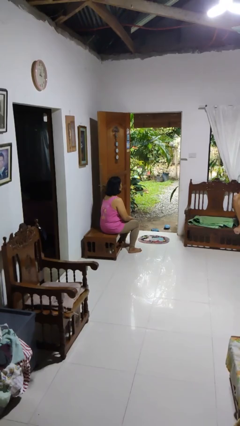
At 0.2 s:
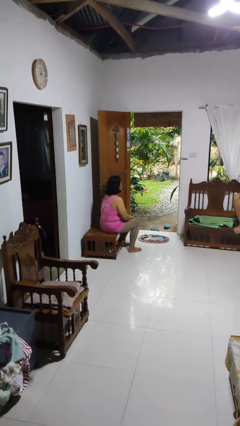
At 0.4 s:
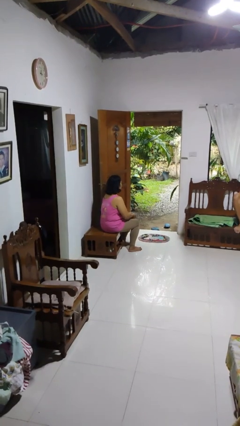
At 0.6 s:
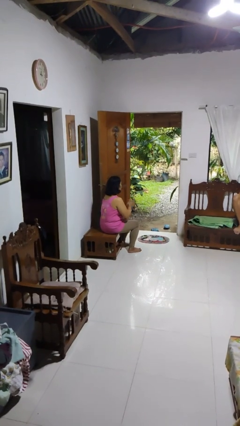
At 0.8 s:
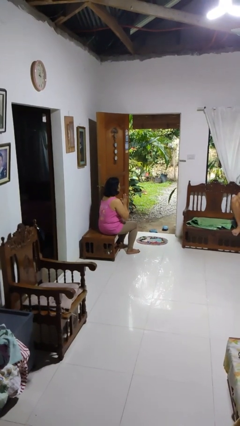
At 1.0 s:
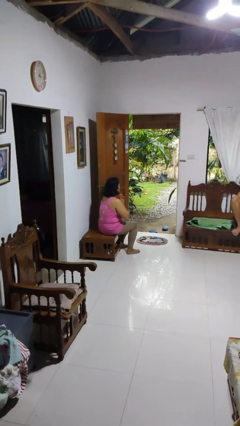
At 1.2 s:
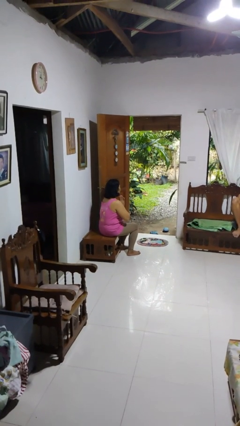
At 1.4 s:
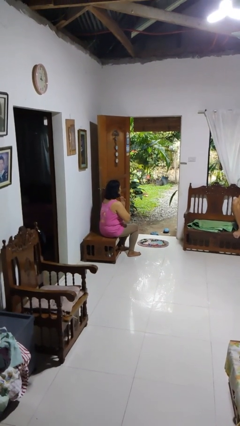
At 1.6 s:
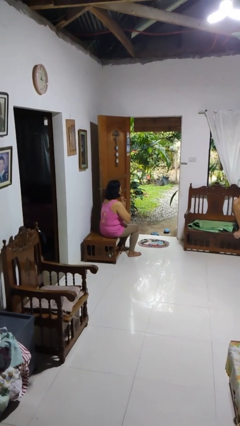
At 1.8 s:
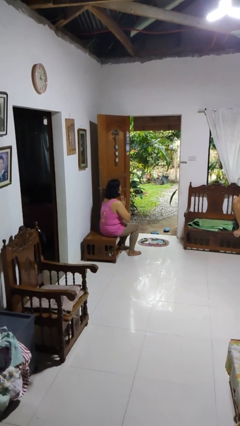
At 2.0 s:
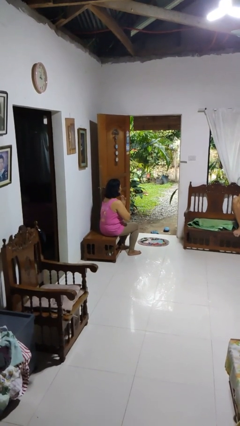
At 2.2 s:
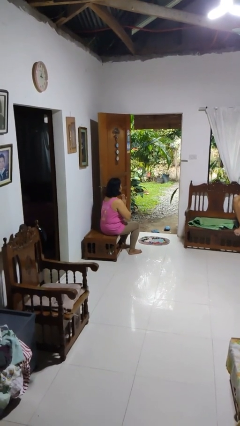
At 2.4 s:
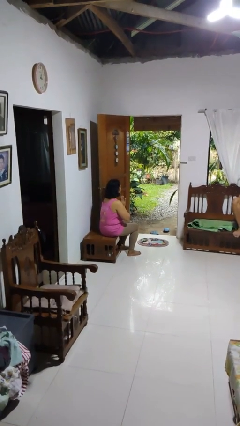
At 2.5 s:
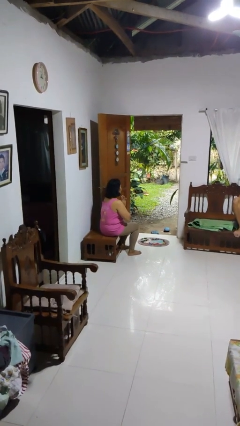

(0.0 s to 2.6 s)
person prays

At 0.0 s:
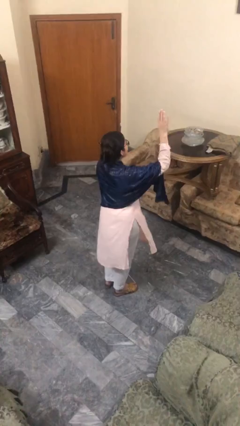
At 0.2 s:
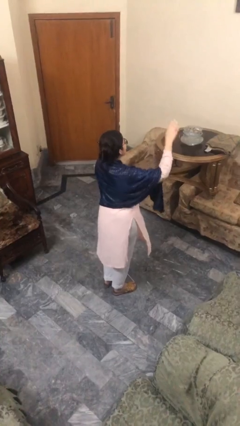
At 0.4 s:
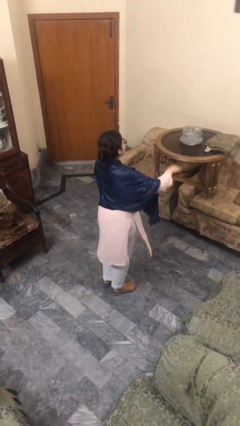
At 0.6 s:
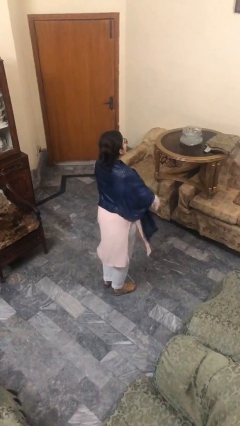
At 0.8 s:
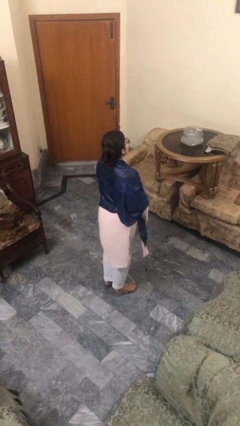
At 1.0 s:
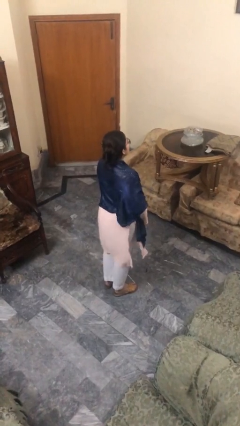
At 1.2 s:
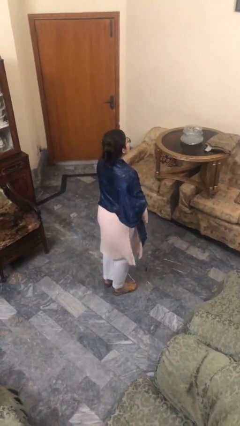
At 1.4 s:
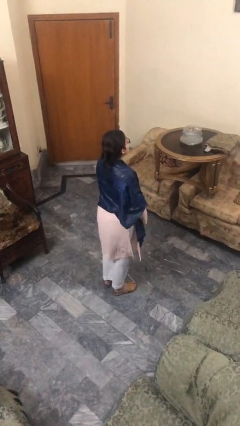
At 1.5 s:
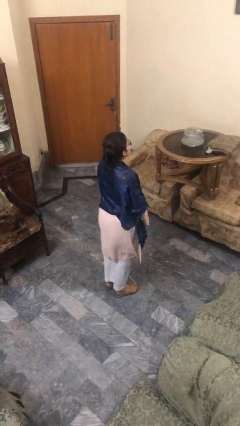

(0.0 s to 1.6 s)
person gestures lower hand

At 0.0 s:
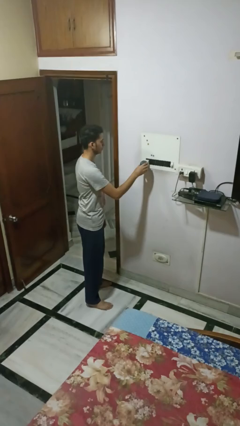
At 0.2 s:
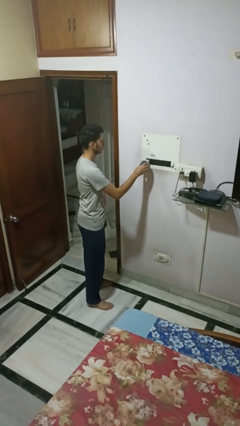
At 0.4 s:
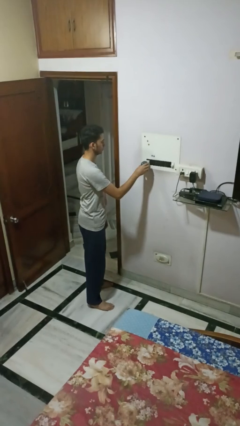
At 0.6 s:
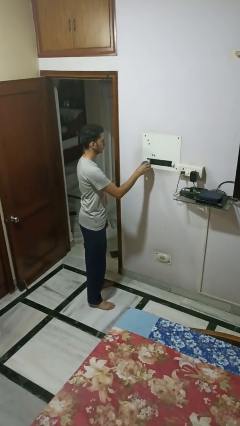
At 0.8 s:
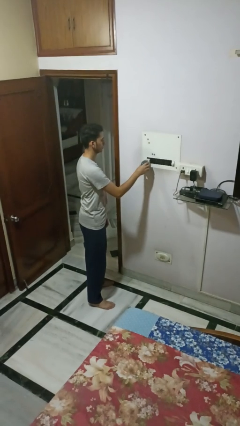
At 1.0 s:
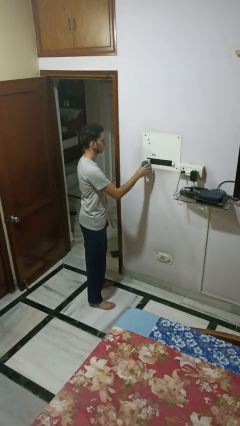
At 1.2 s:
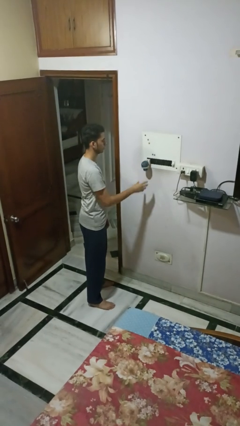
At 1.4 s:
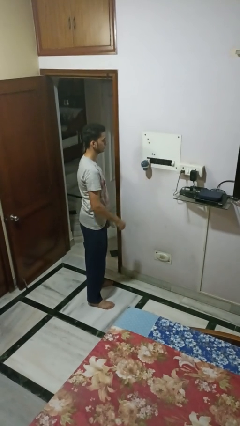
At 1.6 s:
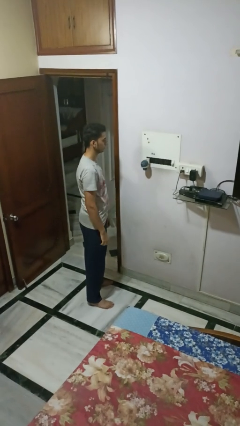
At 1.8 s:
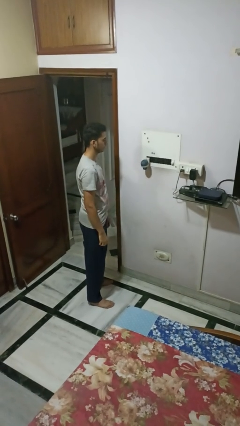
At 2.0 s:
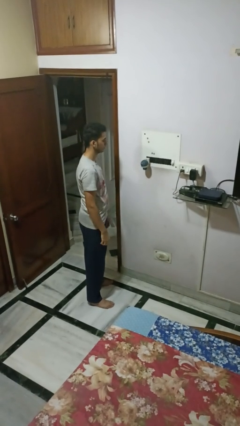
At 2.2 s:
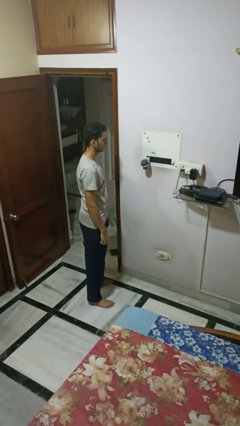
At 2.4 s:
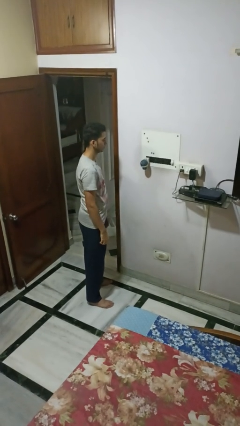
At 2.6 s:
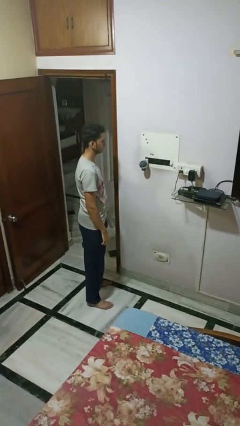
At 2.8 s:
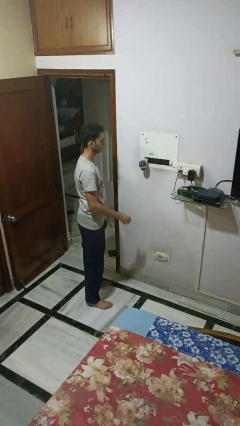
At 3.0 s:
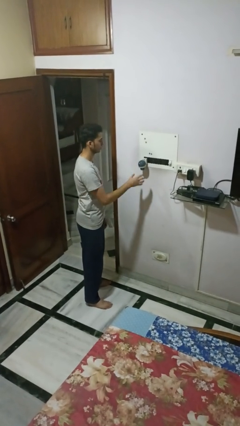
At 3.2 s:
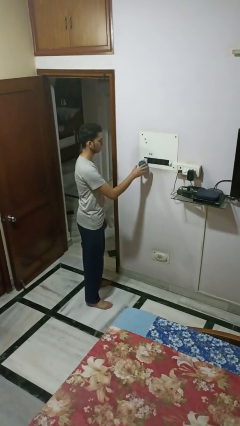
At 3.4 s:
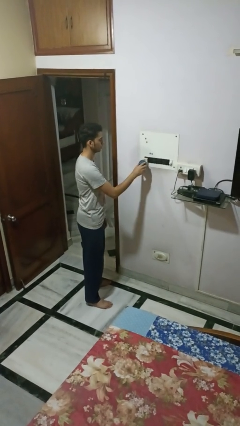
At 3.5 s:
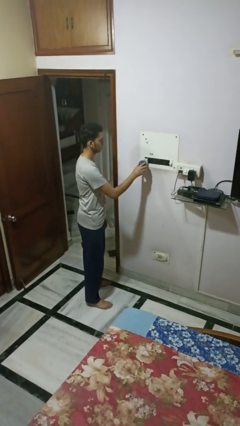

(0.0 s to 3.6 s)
person plugs into electrical socket

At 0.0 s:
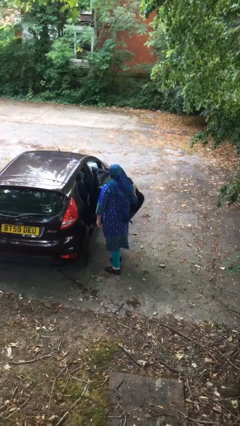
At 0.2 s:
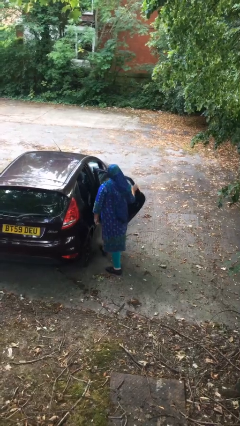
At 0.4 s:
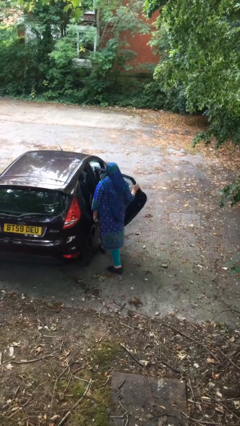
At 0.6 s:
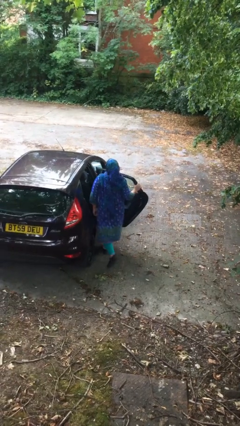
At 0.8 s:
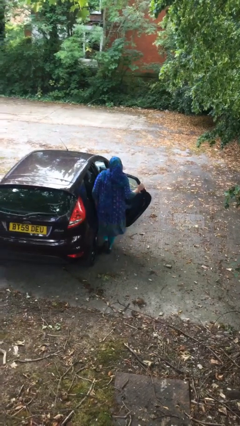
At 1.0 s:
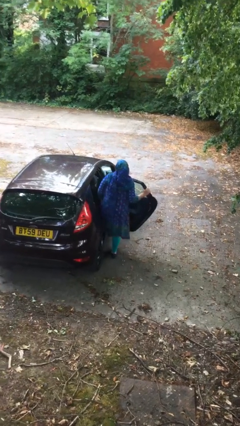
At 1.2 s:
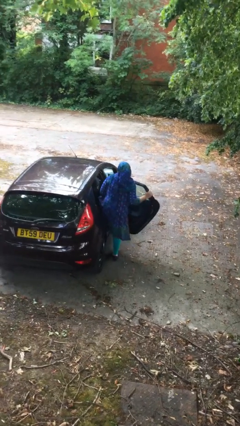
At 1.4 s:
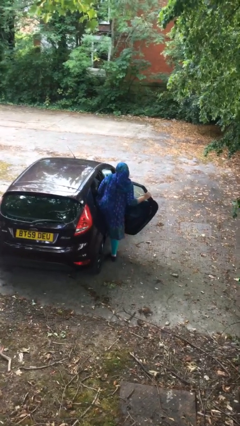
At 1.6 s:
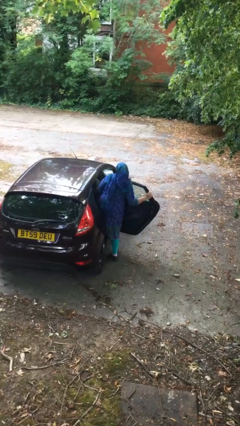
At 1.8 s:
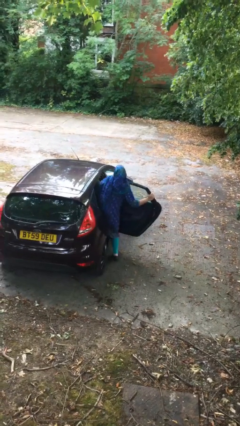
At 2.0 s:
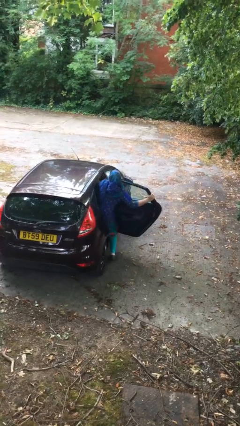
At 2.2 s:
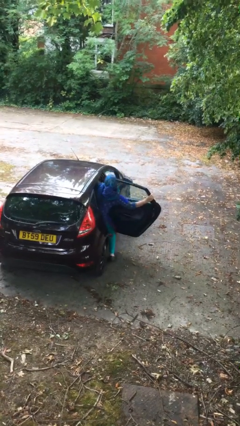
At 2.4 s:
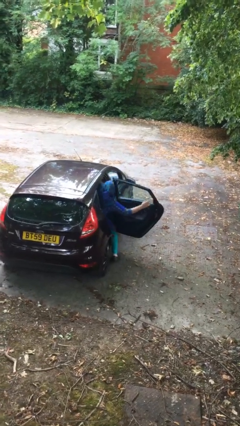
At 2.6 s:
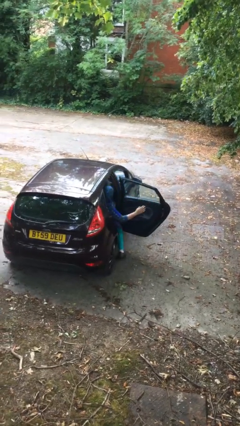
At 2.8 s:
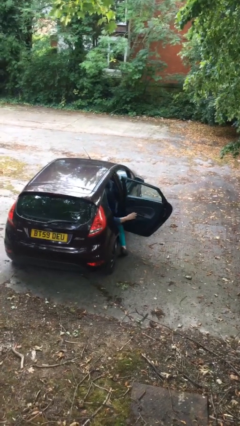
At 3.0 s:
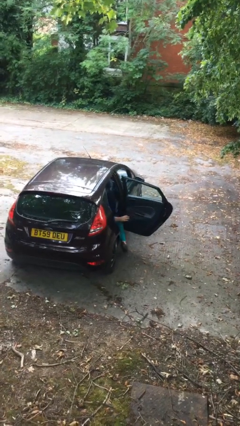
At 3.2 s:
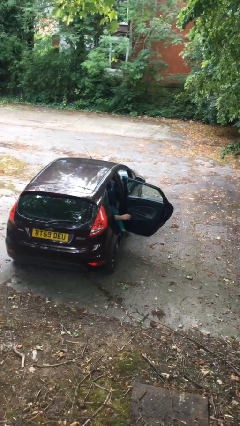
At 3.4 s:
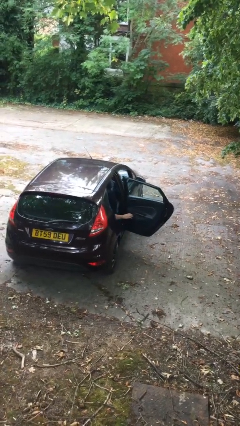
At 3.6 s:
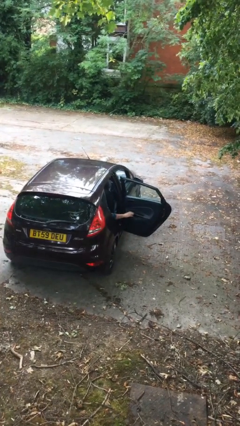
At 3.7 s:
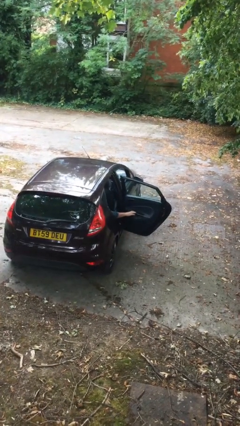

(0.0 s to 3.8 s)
person enters car

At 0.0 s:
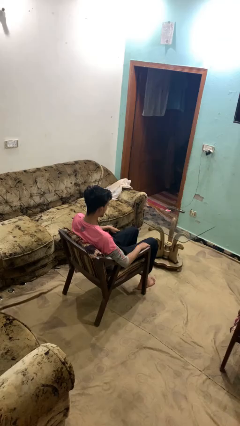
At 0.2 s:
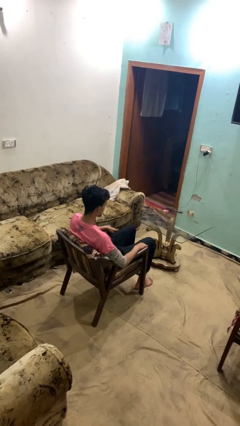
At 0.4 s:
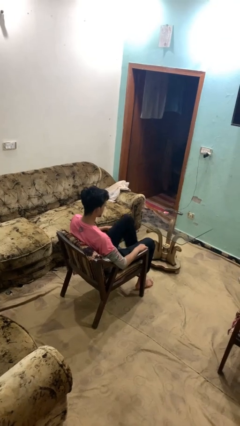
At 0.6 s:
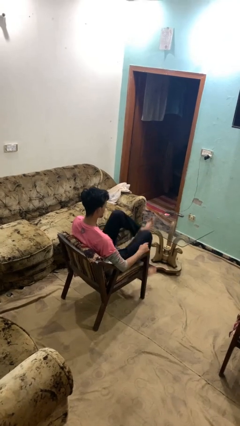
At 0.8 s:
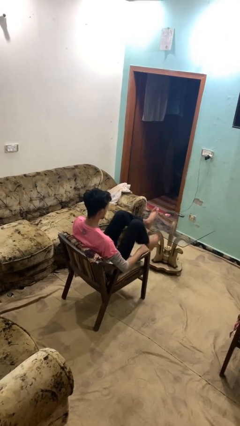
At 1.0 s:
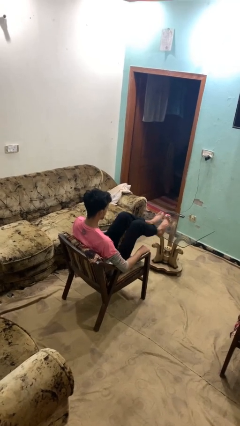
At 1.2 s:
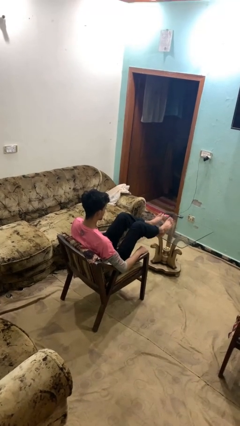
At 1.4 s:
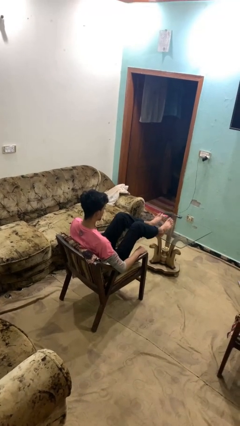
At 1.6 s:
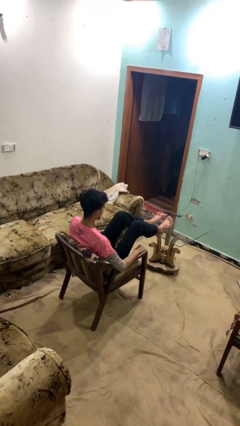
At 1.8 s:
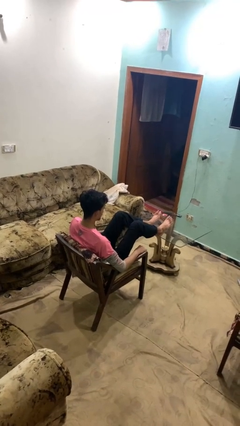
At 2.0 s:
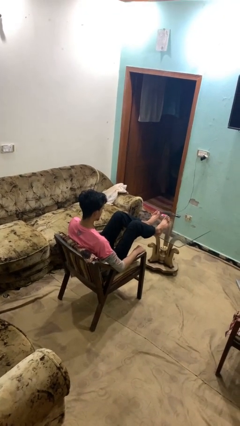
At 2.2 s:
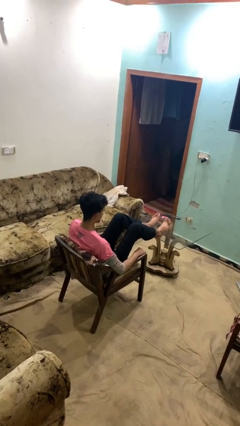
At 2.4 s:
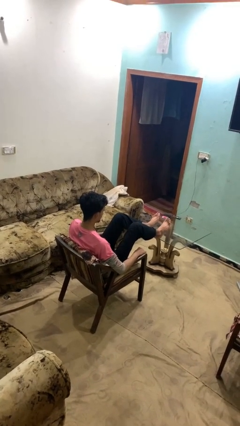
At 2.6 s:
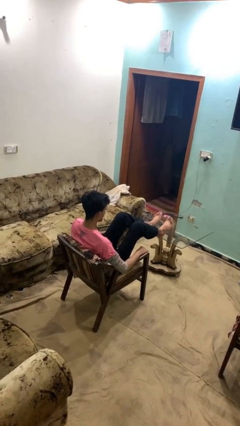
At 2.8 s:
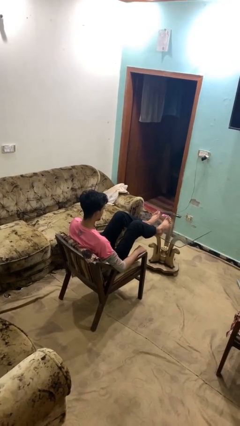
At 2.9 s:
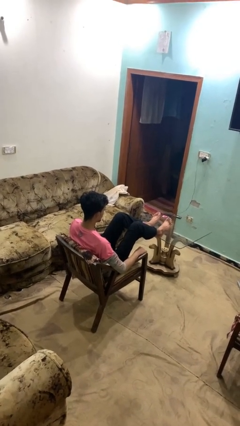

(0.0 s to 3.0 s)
person puts feet up

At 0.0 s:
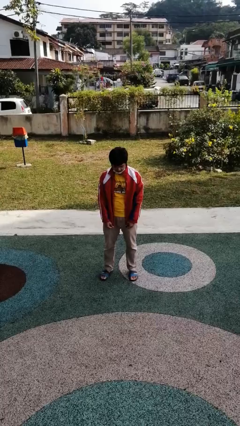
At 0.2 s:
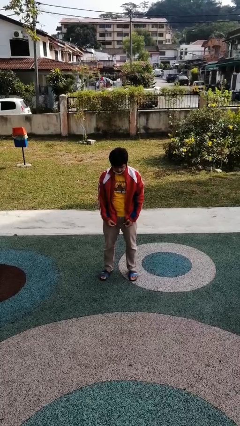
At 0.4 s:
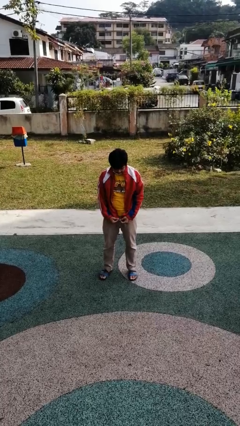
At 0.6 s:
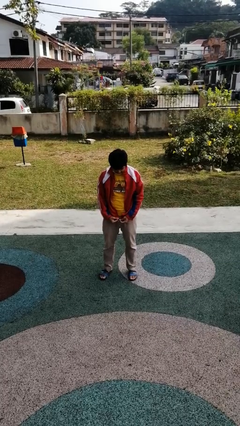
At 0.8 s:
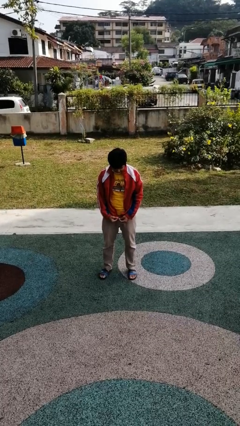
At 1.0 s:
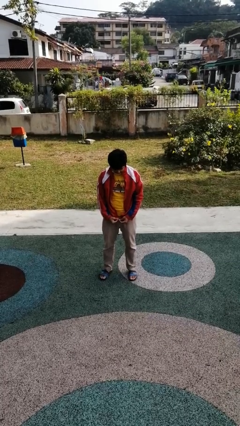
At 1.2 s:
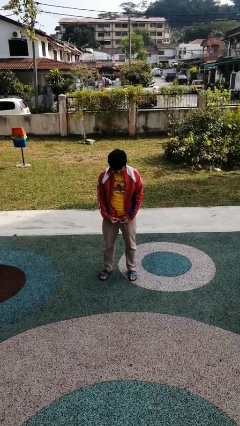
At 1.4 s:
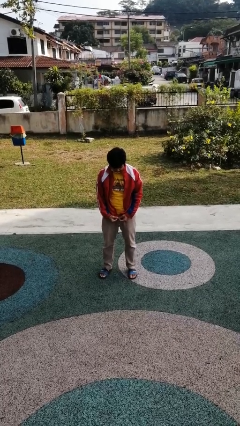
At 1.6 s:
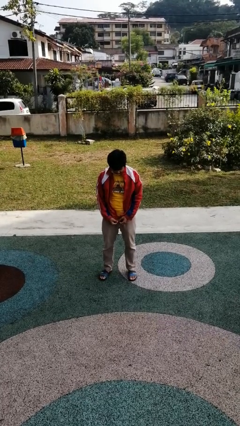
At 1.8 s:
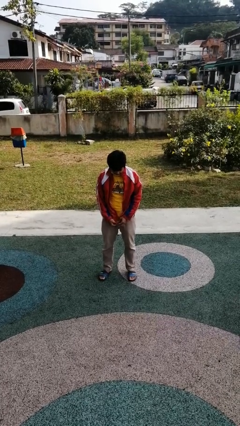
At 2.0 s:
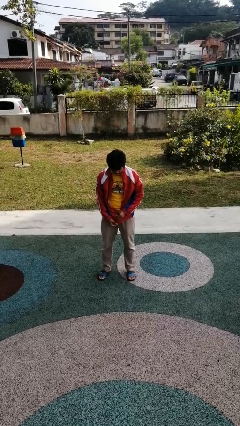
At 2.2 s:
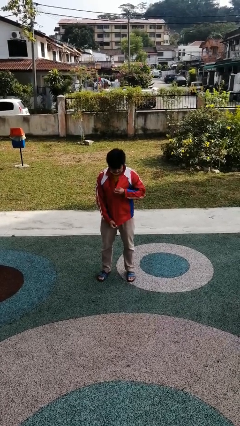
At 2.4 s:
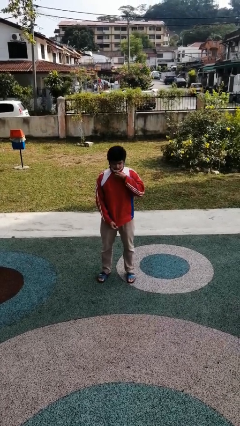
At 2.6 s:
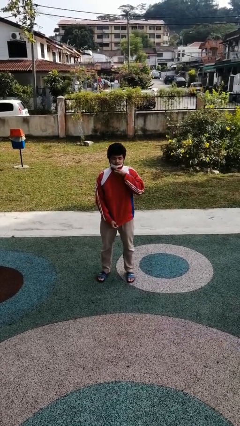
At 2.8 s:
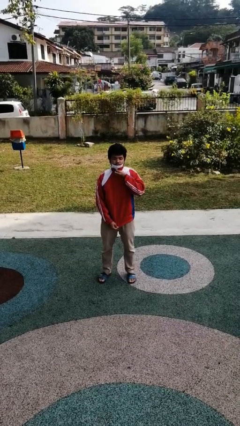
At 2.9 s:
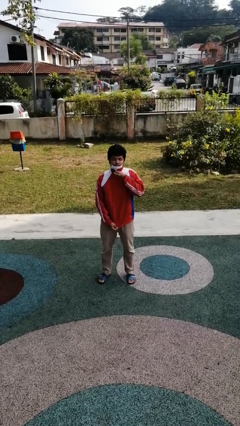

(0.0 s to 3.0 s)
person zips up jacket

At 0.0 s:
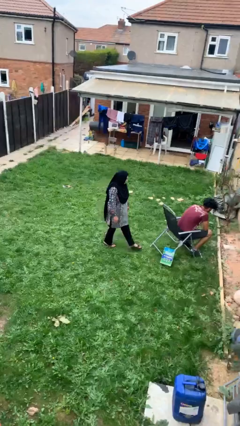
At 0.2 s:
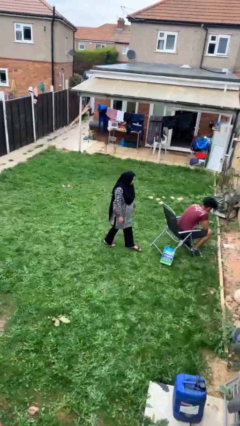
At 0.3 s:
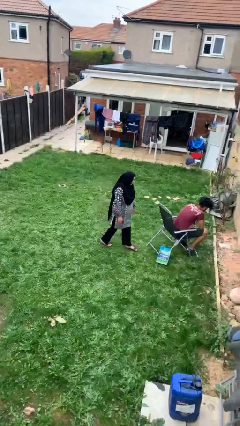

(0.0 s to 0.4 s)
person steals object from person
